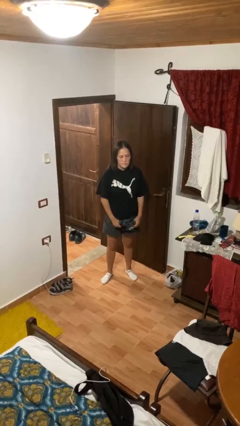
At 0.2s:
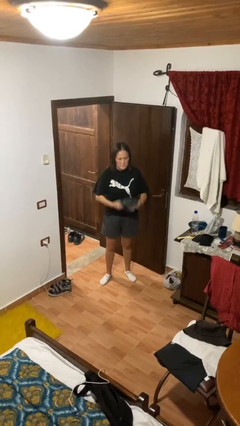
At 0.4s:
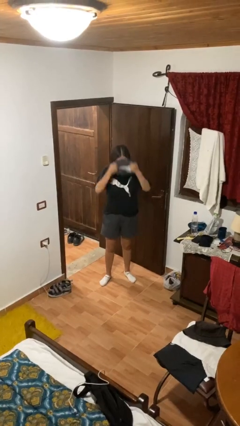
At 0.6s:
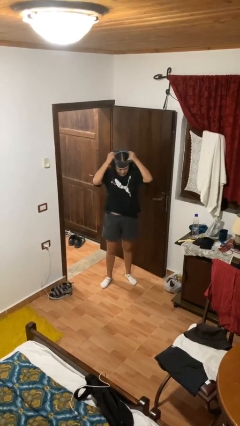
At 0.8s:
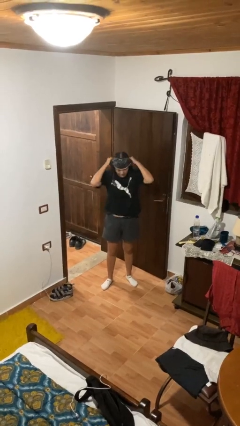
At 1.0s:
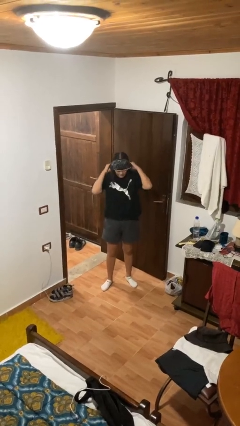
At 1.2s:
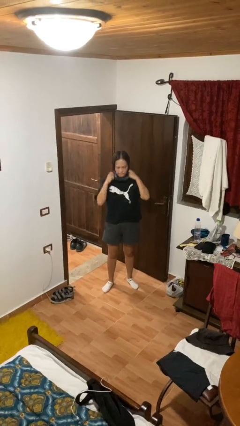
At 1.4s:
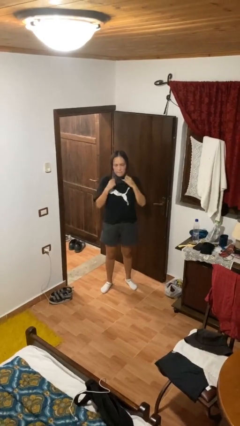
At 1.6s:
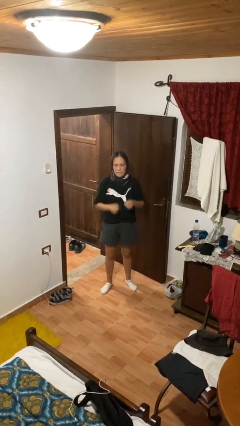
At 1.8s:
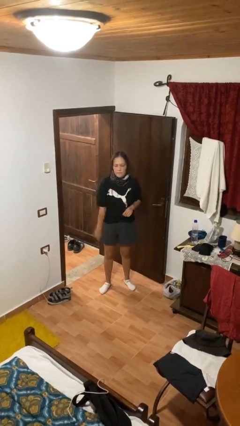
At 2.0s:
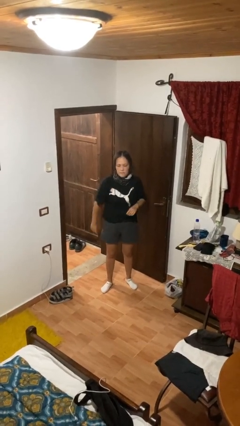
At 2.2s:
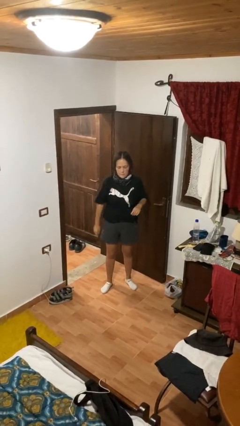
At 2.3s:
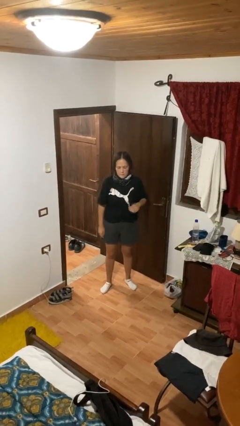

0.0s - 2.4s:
person puts on scarf

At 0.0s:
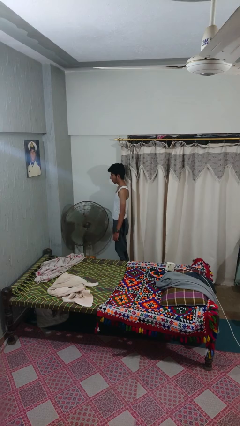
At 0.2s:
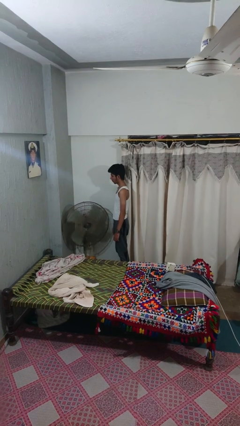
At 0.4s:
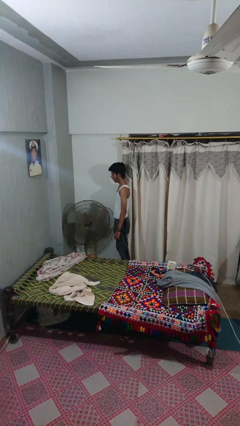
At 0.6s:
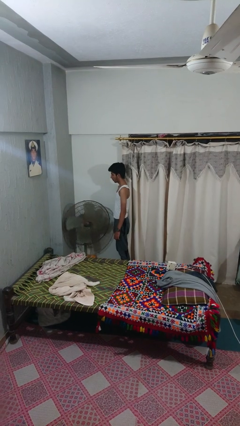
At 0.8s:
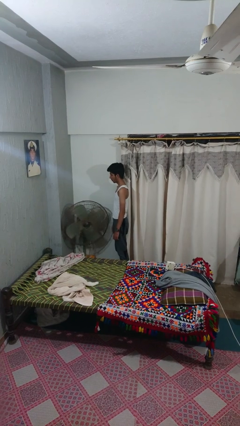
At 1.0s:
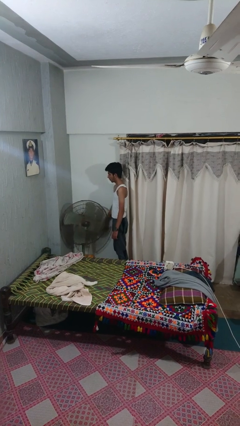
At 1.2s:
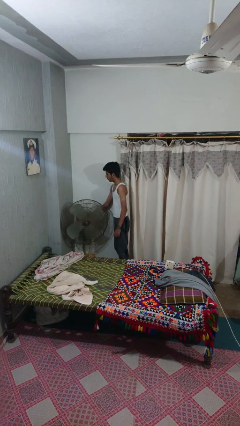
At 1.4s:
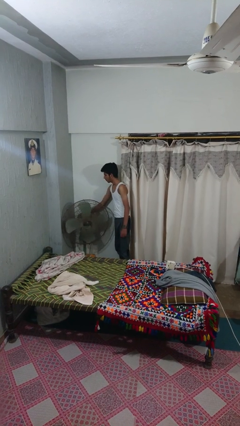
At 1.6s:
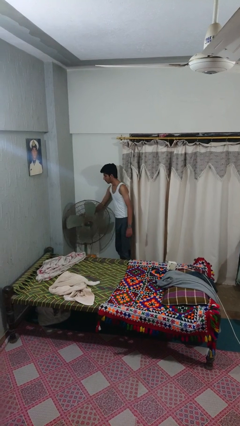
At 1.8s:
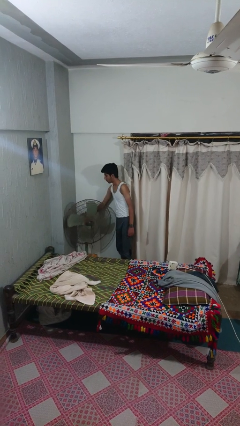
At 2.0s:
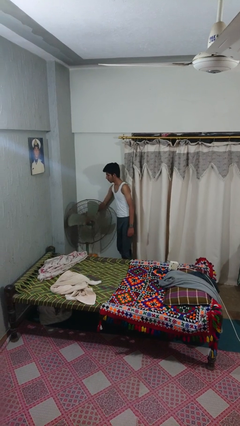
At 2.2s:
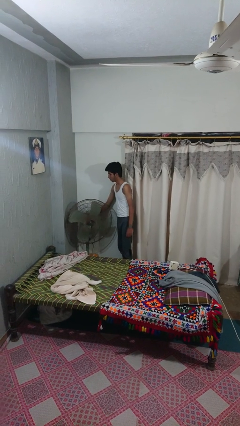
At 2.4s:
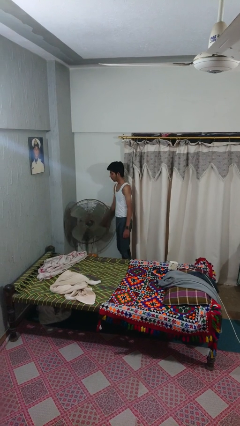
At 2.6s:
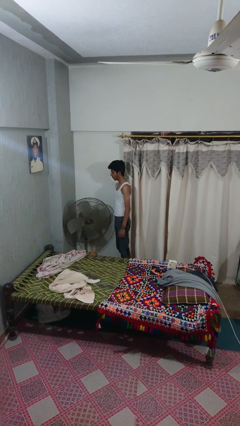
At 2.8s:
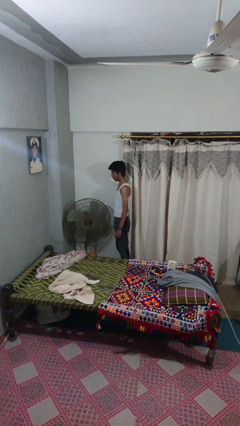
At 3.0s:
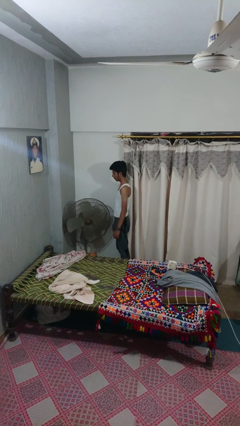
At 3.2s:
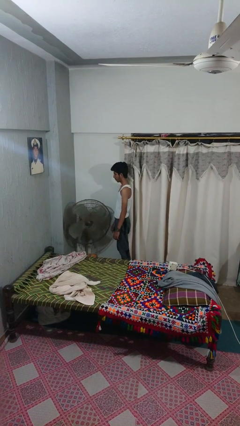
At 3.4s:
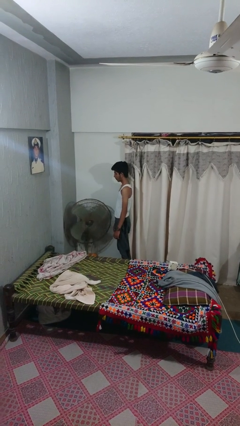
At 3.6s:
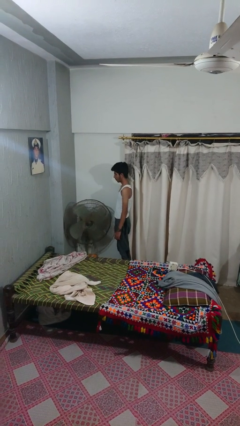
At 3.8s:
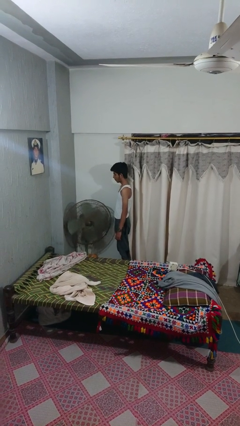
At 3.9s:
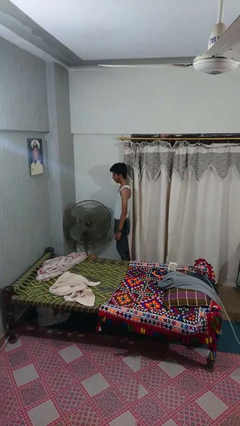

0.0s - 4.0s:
person turns on fan

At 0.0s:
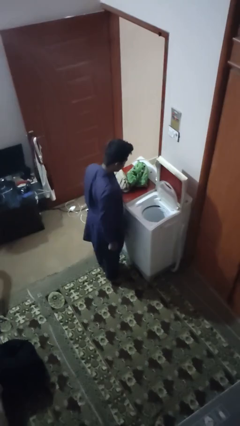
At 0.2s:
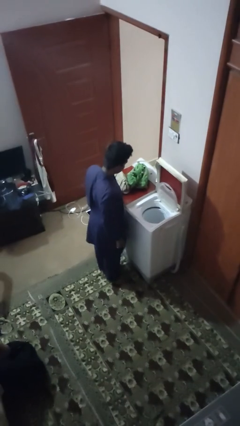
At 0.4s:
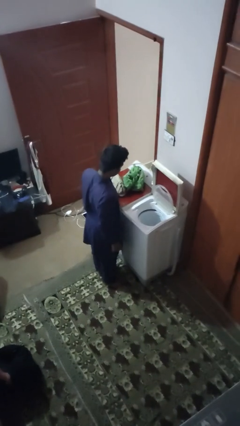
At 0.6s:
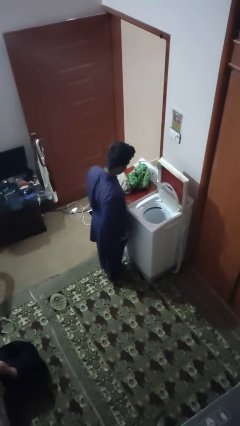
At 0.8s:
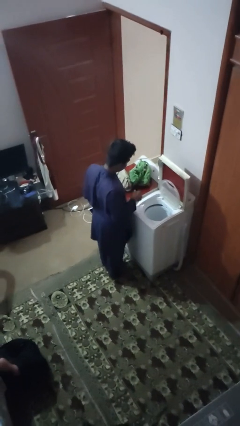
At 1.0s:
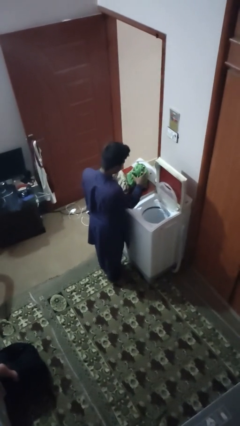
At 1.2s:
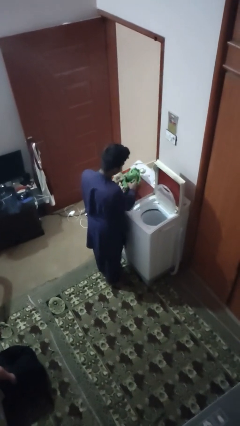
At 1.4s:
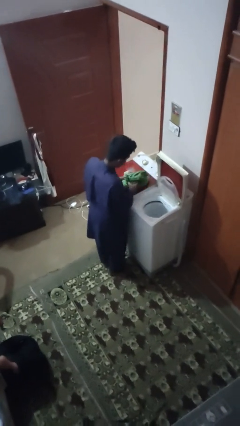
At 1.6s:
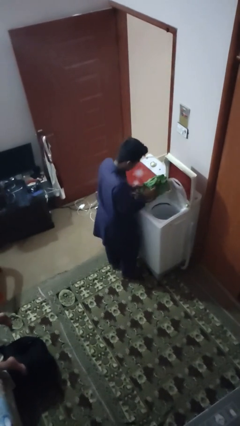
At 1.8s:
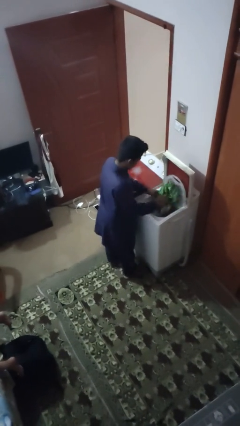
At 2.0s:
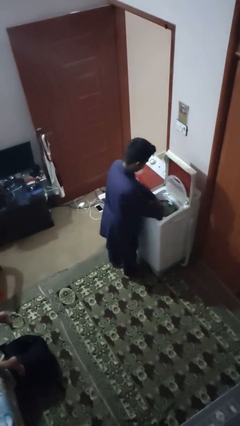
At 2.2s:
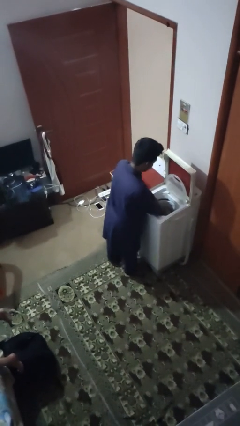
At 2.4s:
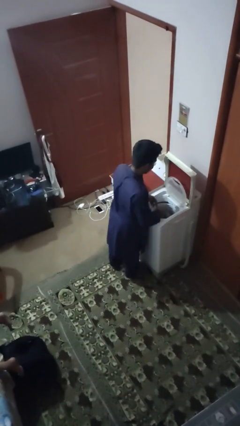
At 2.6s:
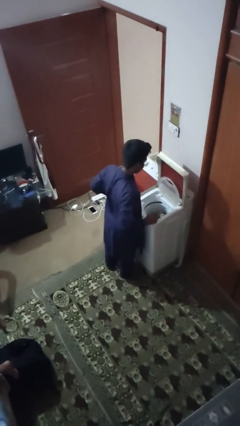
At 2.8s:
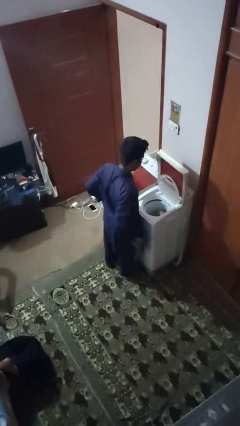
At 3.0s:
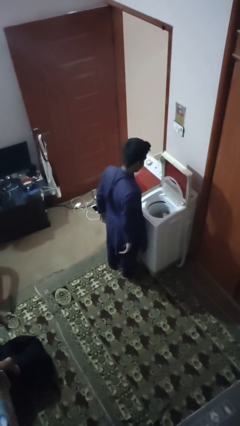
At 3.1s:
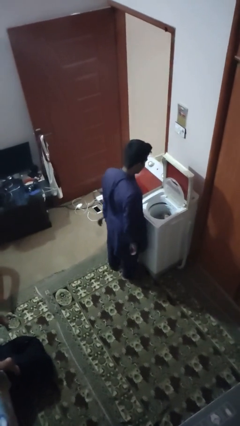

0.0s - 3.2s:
person loads dryer

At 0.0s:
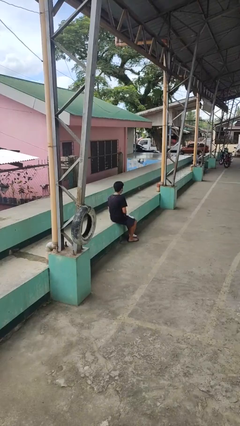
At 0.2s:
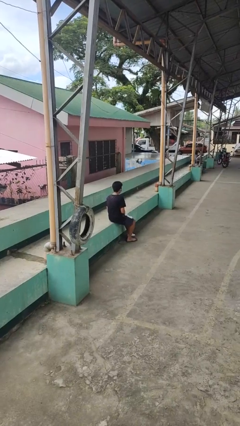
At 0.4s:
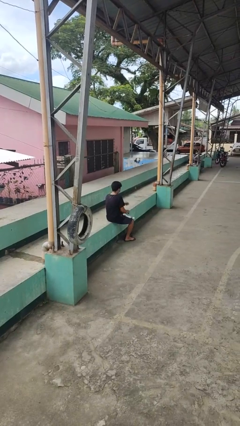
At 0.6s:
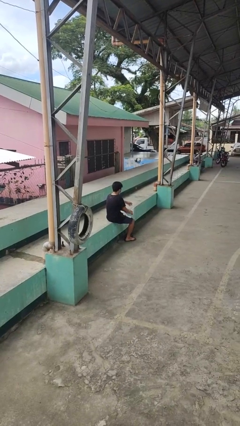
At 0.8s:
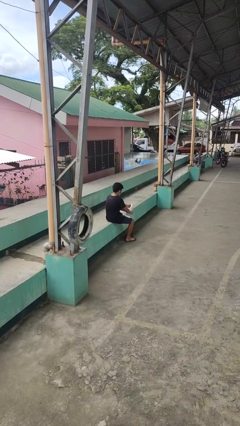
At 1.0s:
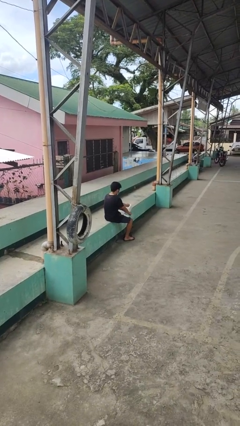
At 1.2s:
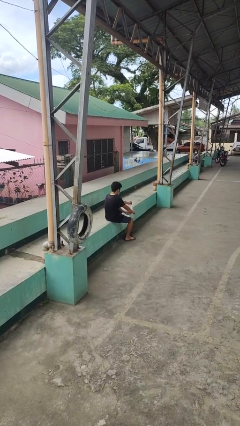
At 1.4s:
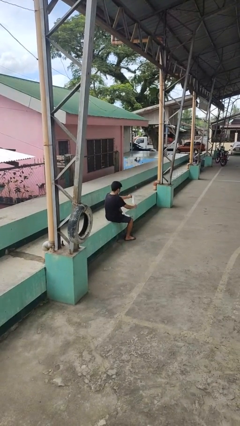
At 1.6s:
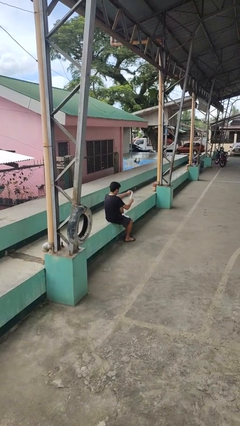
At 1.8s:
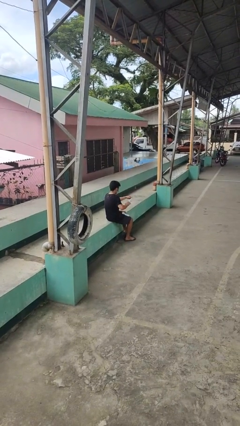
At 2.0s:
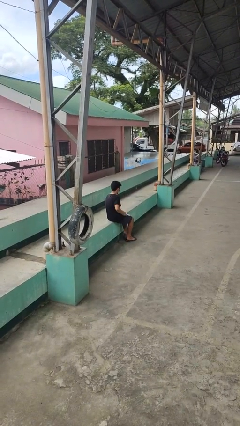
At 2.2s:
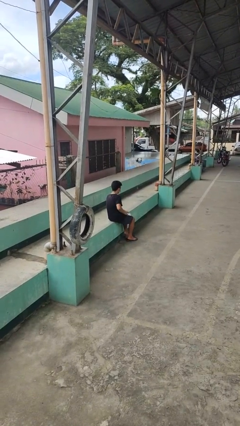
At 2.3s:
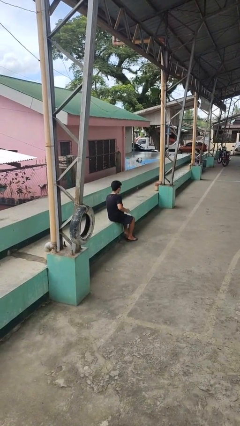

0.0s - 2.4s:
person takes off socks

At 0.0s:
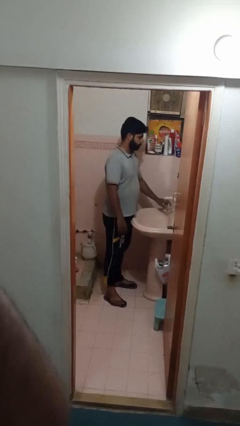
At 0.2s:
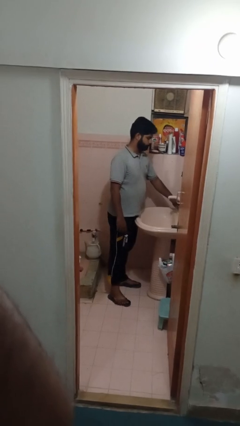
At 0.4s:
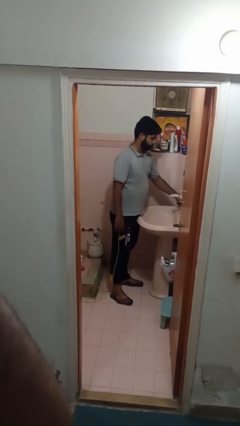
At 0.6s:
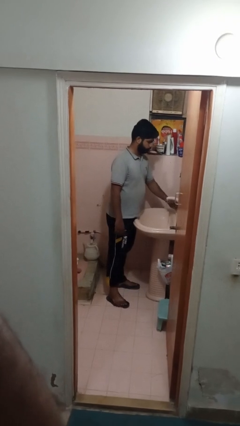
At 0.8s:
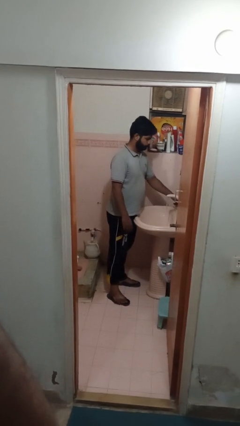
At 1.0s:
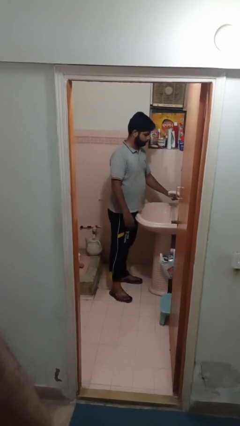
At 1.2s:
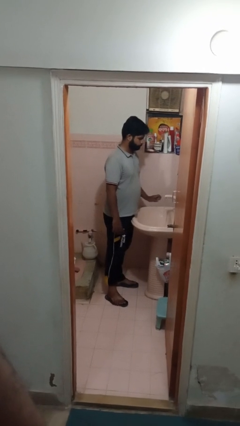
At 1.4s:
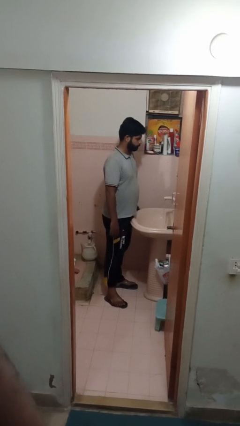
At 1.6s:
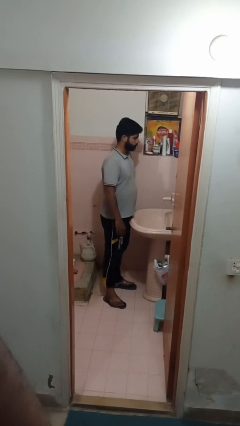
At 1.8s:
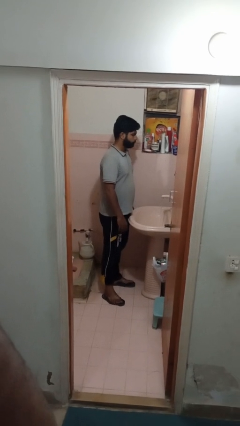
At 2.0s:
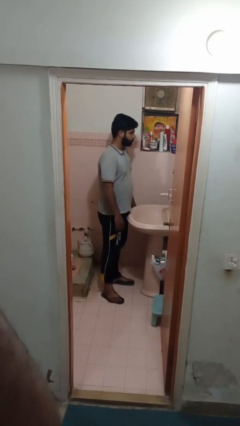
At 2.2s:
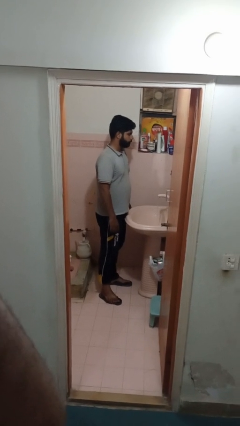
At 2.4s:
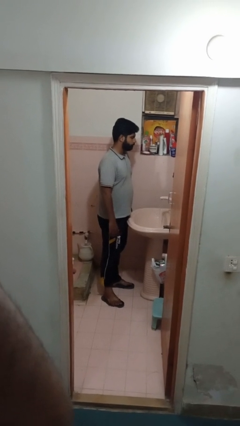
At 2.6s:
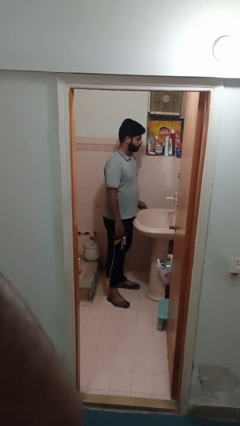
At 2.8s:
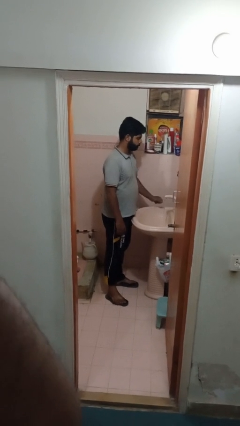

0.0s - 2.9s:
person turns on faucet

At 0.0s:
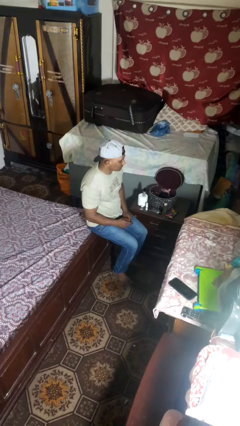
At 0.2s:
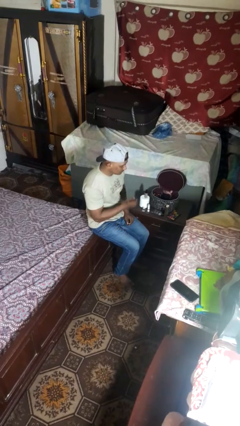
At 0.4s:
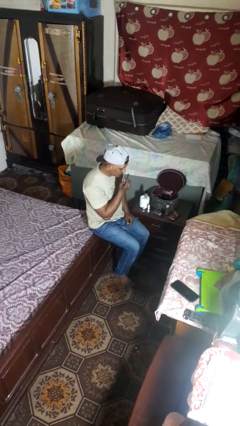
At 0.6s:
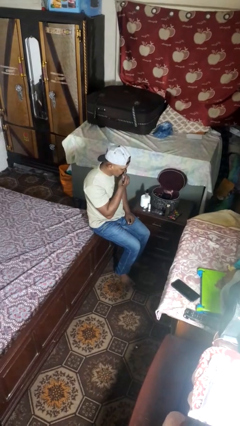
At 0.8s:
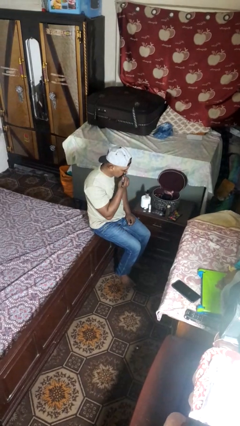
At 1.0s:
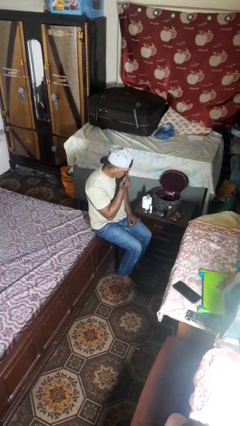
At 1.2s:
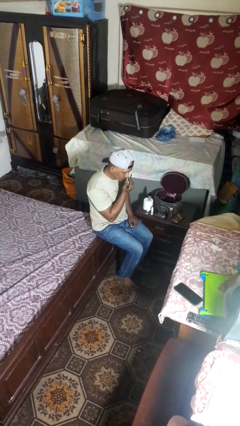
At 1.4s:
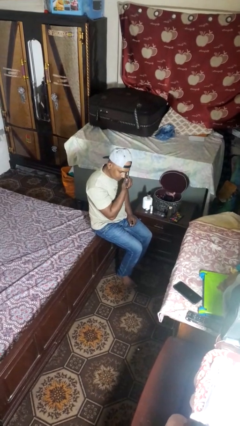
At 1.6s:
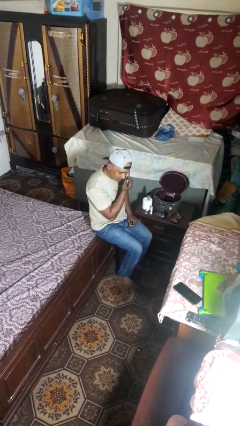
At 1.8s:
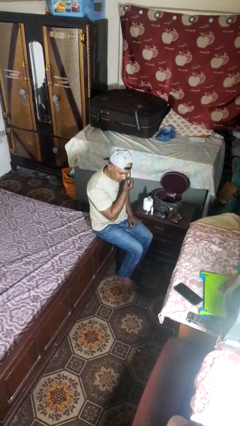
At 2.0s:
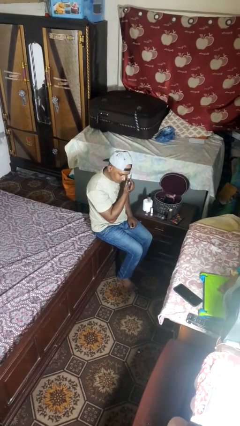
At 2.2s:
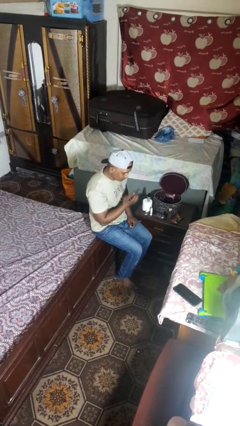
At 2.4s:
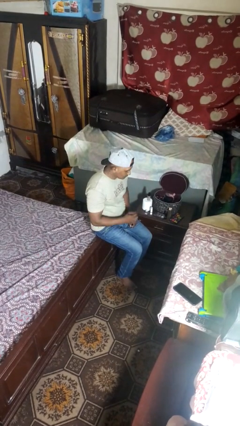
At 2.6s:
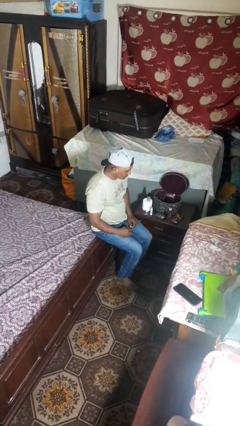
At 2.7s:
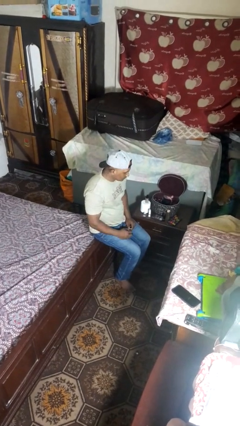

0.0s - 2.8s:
person applies eye makeup

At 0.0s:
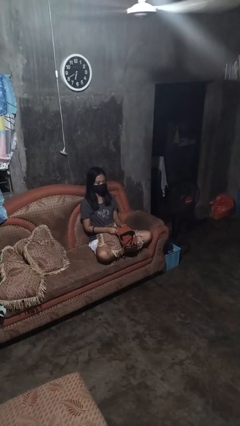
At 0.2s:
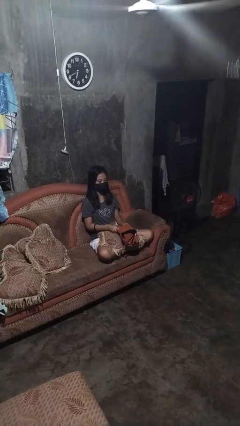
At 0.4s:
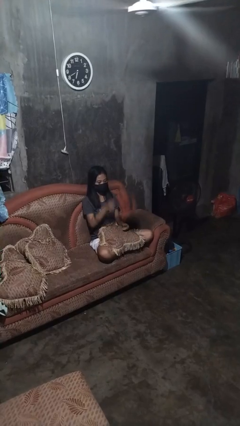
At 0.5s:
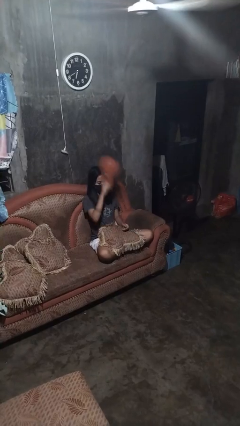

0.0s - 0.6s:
person puts on hat
